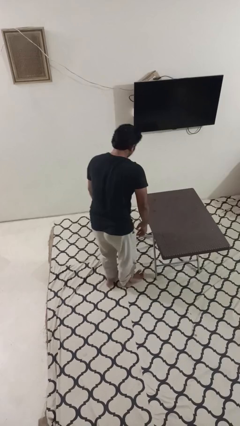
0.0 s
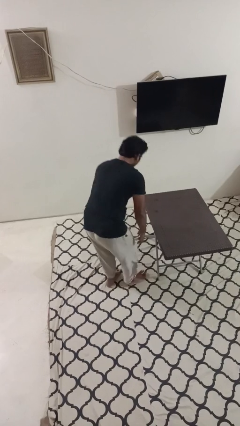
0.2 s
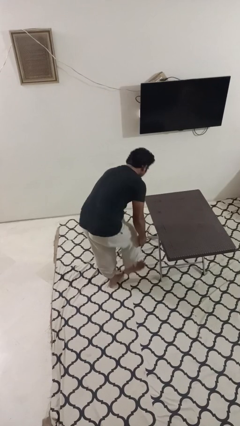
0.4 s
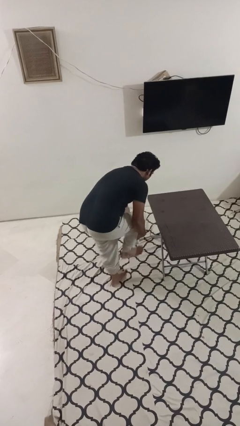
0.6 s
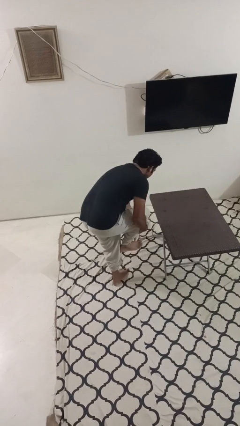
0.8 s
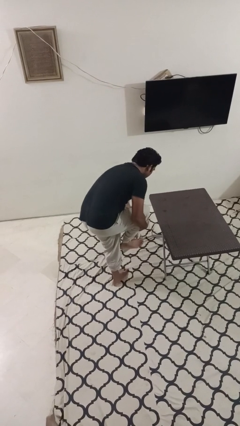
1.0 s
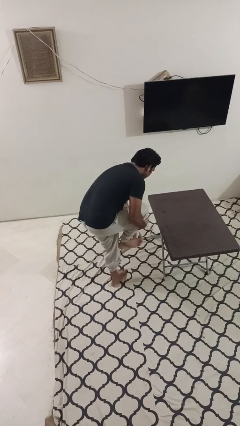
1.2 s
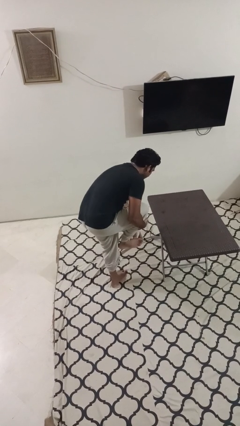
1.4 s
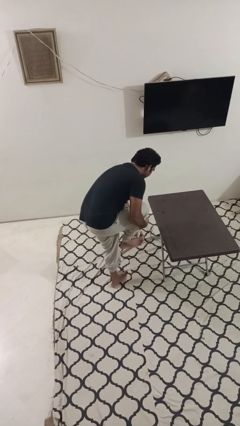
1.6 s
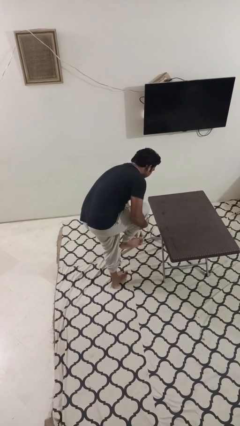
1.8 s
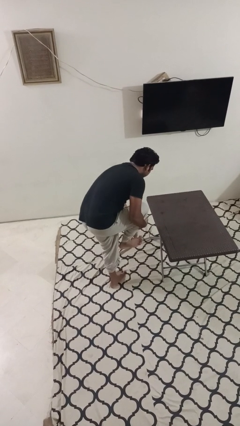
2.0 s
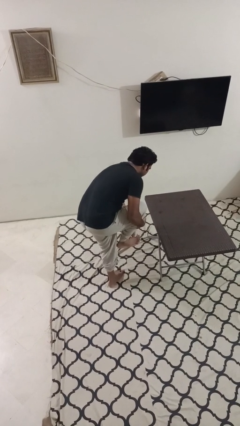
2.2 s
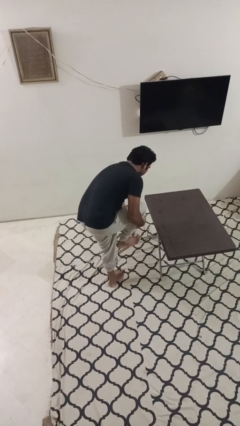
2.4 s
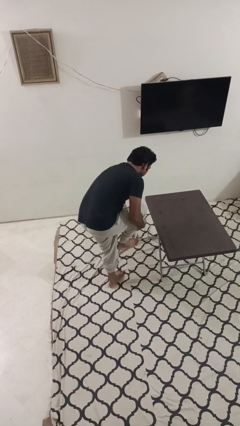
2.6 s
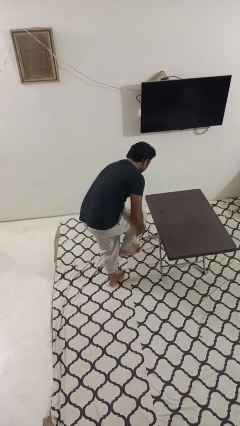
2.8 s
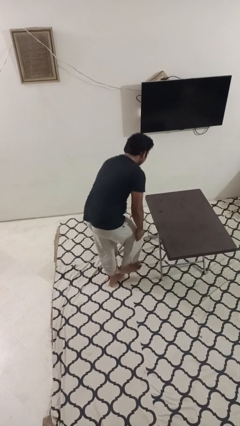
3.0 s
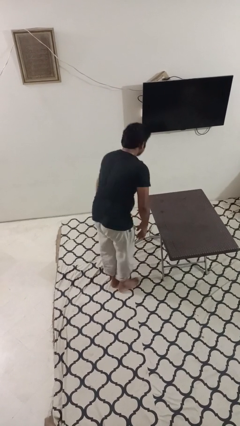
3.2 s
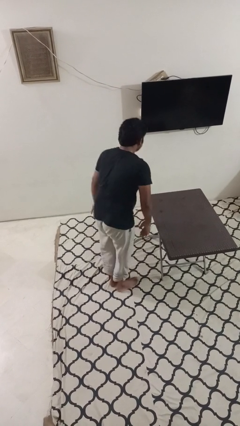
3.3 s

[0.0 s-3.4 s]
person stubs toe

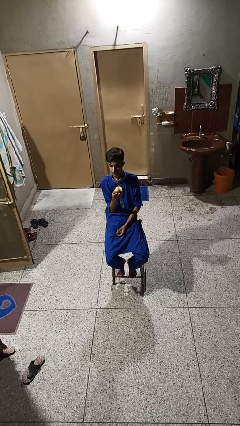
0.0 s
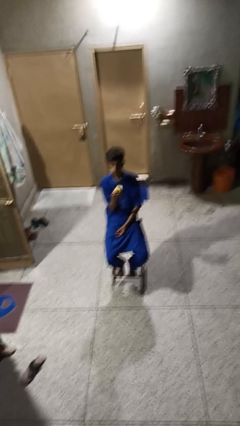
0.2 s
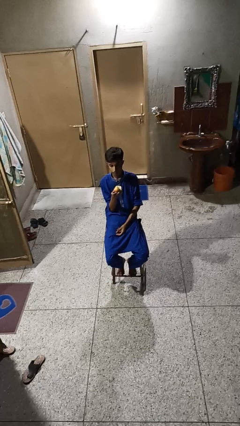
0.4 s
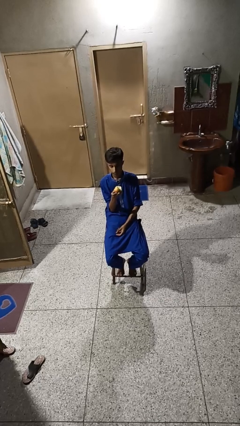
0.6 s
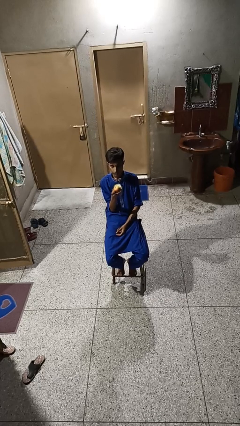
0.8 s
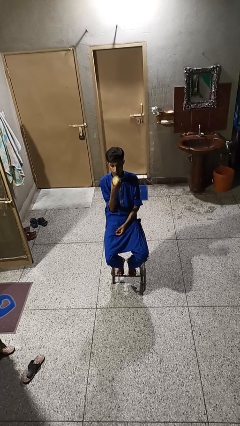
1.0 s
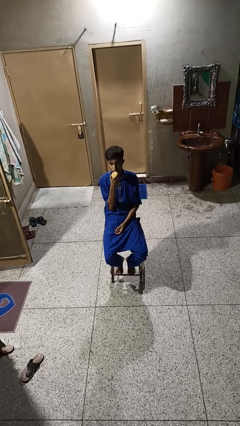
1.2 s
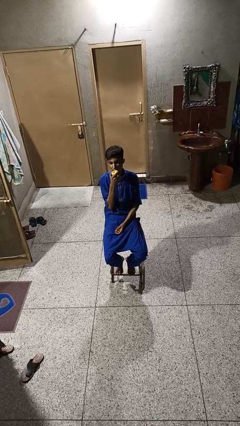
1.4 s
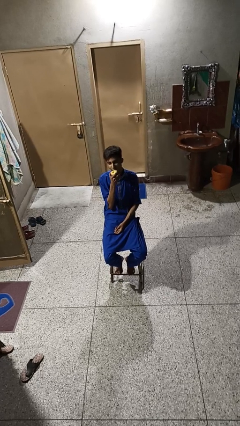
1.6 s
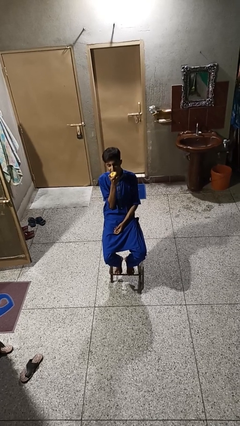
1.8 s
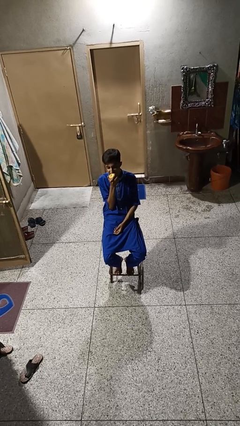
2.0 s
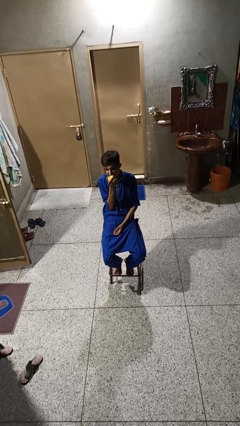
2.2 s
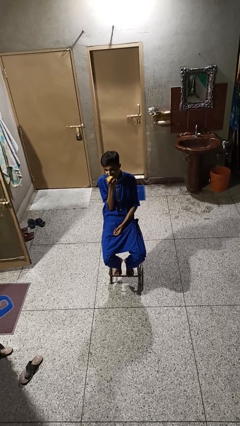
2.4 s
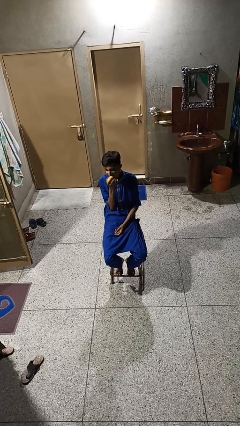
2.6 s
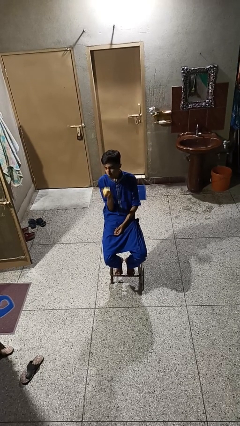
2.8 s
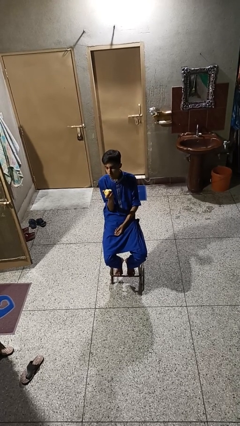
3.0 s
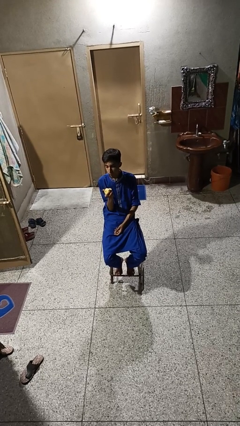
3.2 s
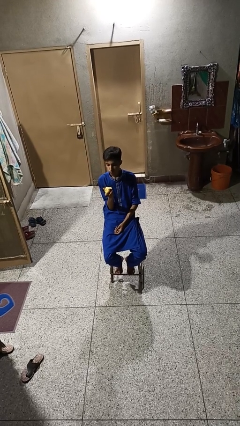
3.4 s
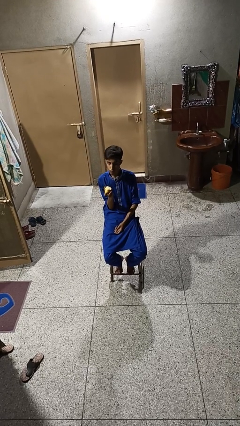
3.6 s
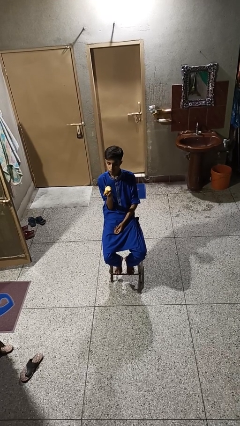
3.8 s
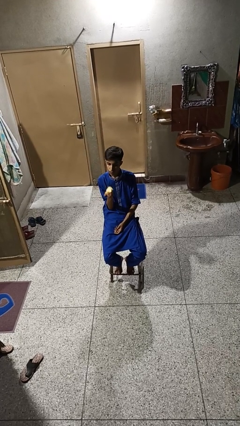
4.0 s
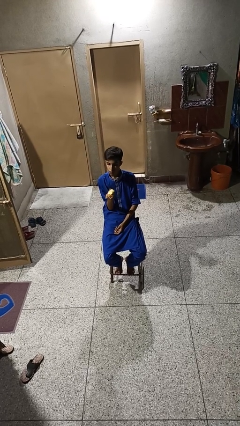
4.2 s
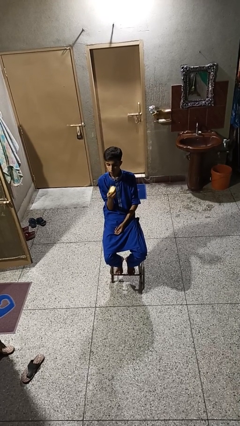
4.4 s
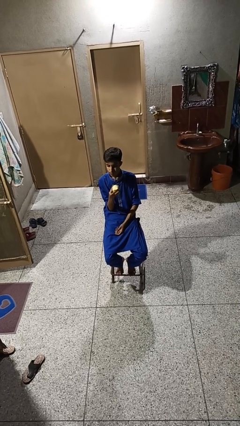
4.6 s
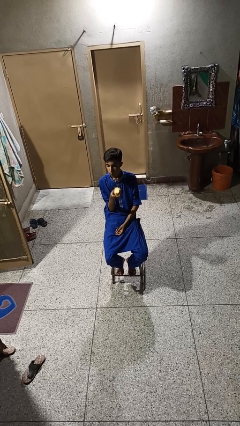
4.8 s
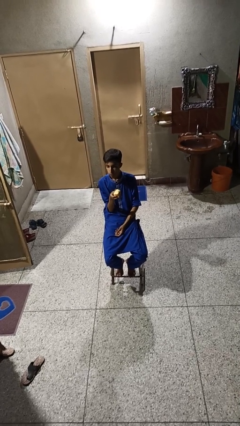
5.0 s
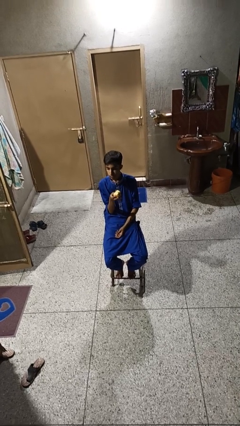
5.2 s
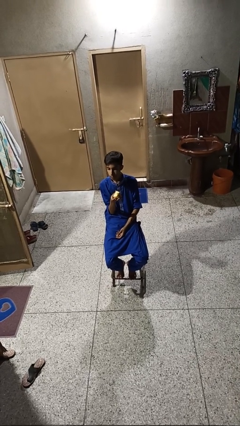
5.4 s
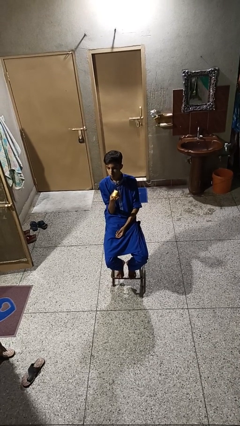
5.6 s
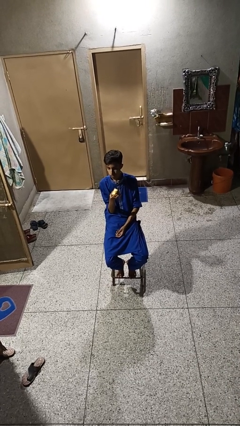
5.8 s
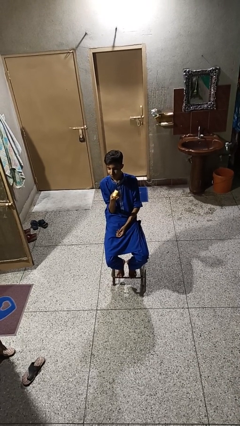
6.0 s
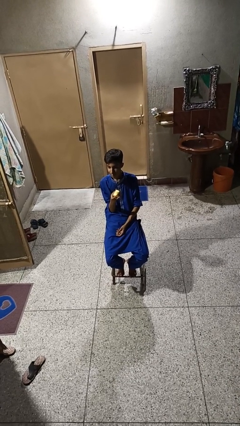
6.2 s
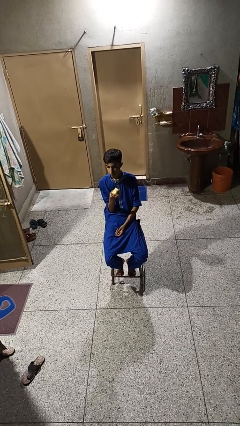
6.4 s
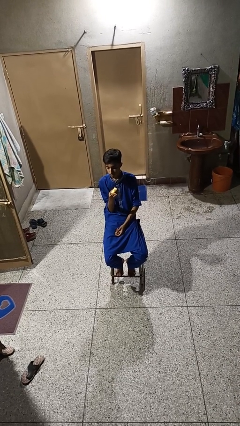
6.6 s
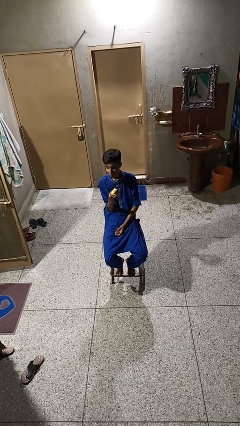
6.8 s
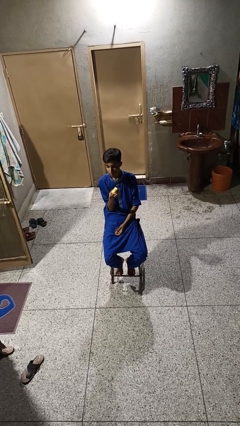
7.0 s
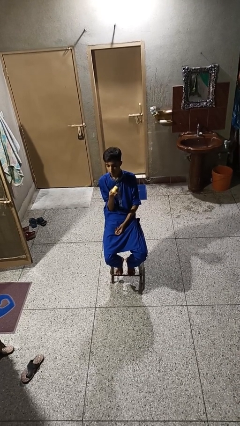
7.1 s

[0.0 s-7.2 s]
person eats apple

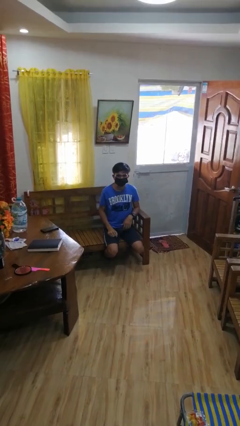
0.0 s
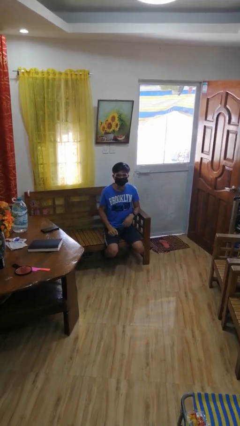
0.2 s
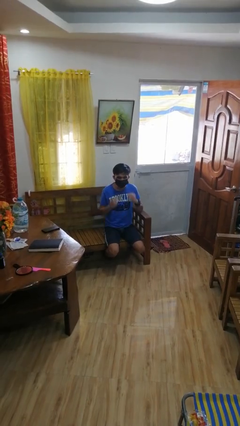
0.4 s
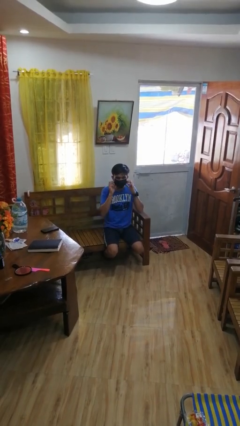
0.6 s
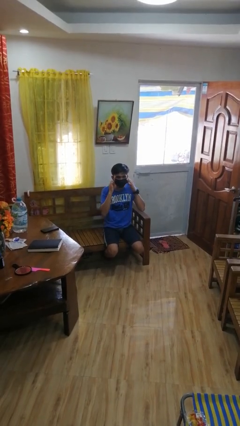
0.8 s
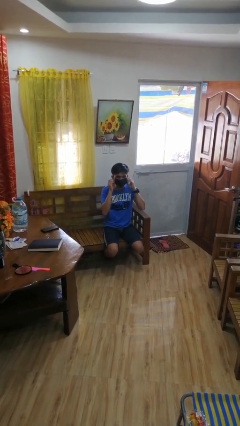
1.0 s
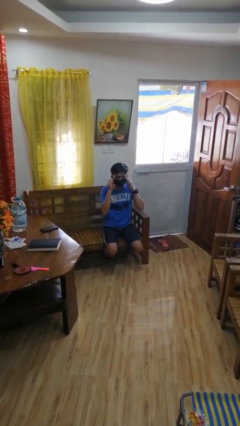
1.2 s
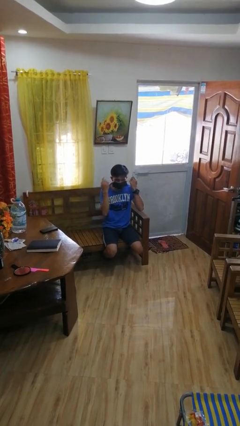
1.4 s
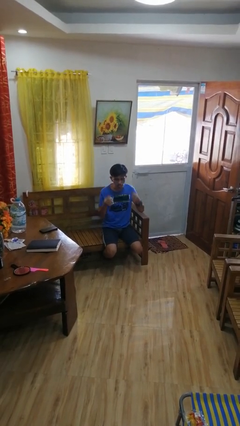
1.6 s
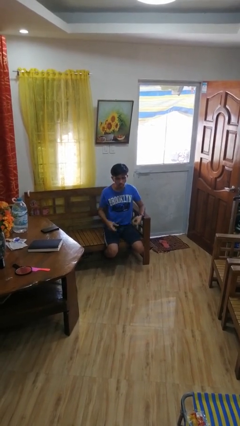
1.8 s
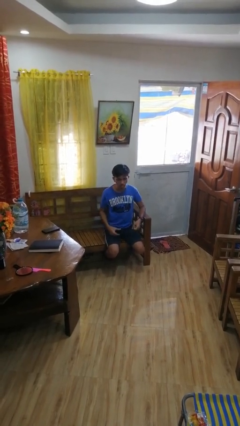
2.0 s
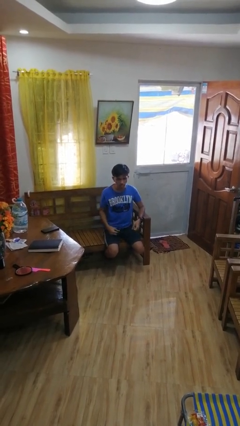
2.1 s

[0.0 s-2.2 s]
person takes off facemask

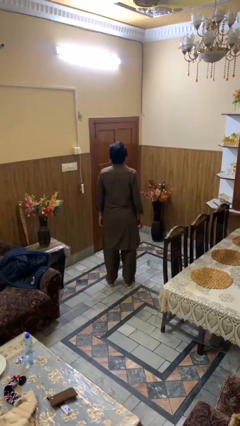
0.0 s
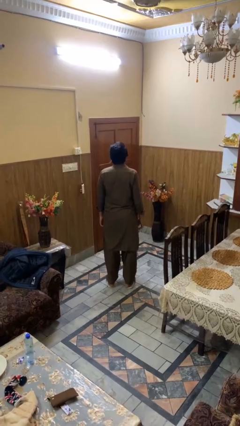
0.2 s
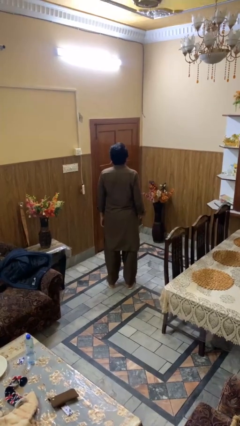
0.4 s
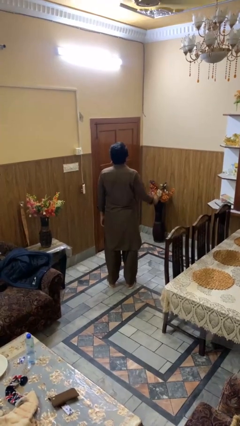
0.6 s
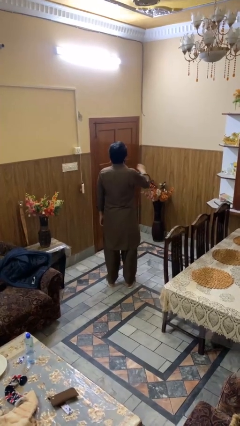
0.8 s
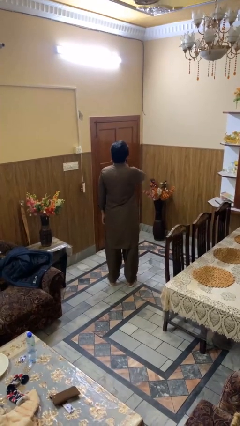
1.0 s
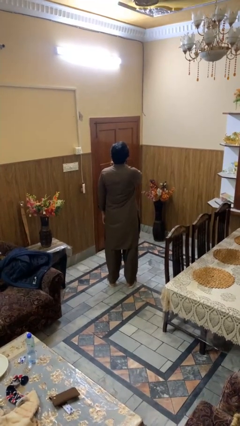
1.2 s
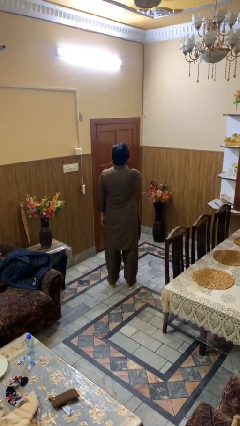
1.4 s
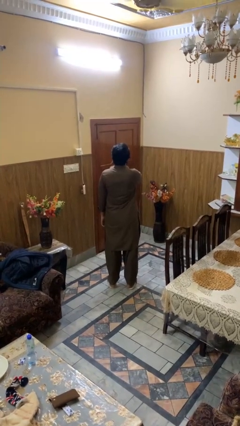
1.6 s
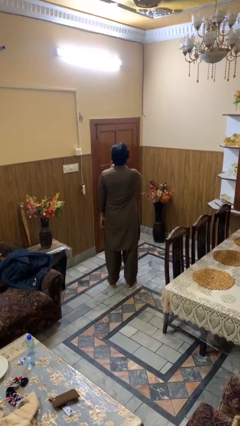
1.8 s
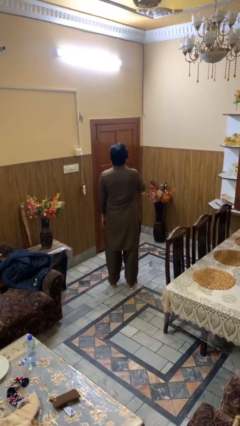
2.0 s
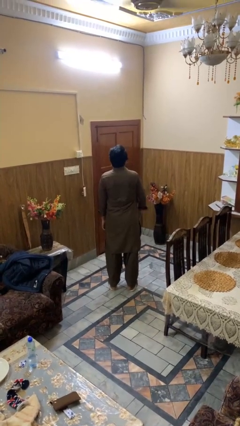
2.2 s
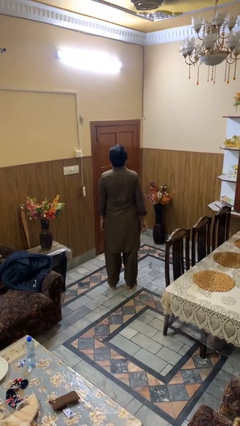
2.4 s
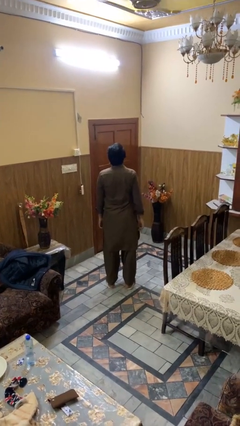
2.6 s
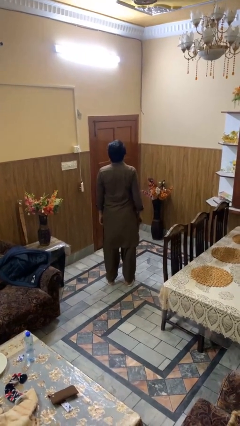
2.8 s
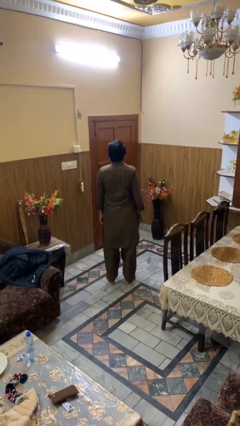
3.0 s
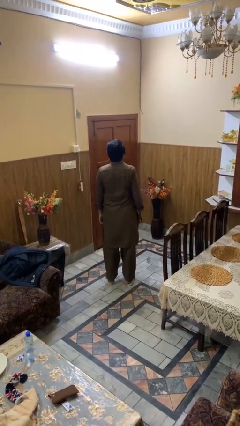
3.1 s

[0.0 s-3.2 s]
person drums on chest

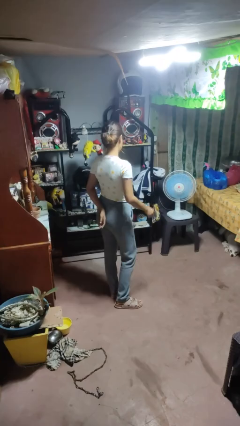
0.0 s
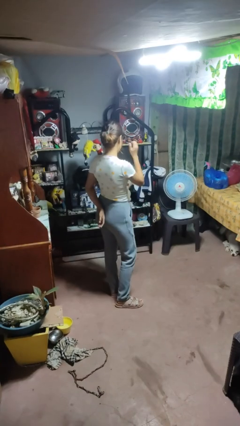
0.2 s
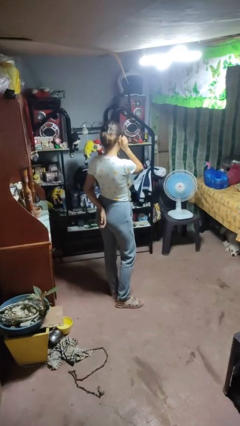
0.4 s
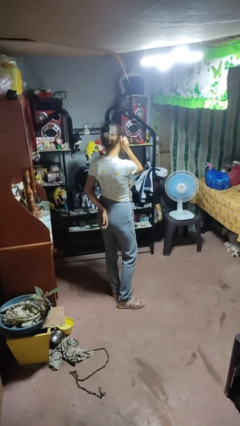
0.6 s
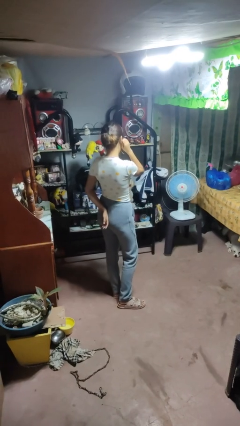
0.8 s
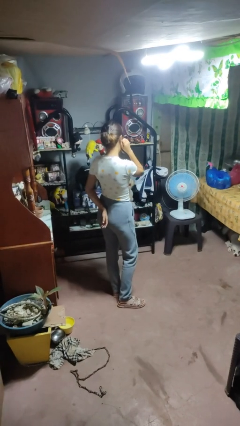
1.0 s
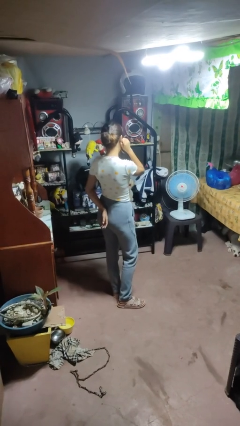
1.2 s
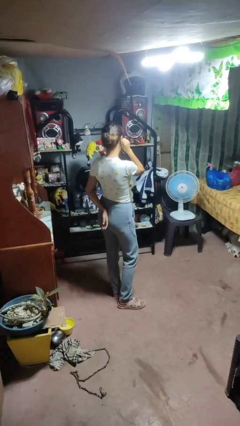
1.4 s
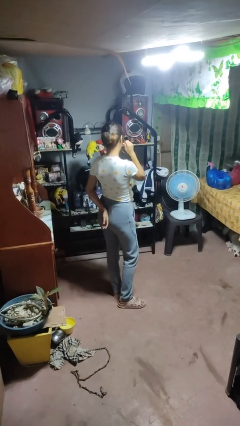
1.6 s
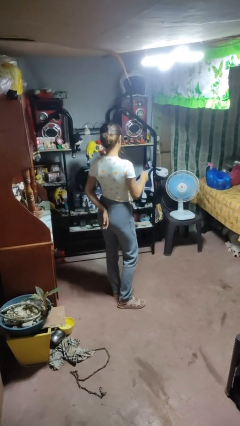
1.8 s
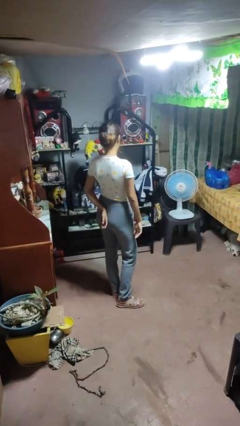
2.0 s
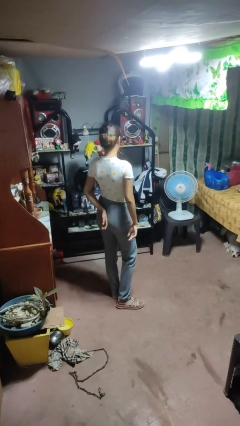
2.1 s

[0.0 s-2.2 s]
person touches earlobe
